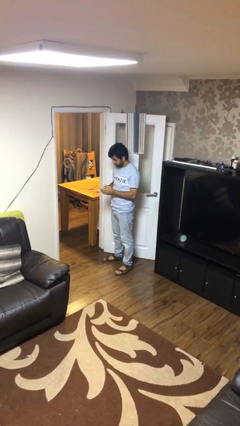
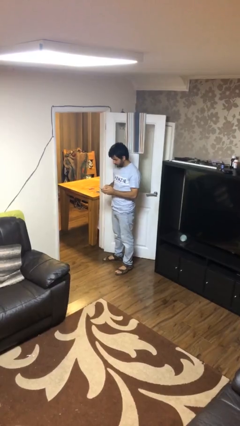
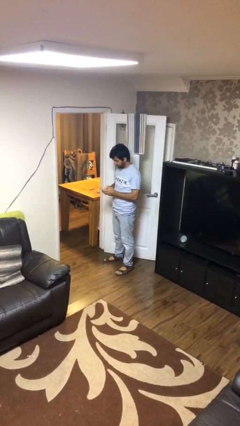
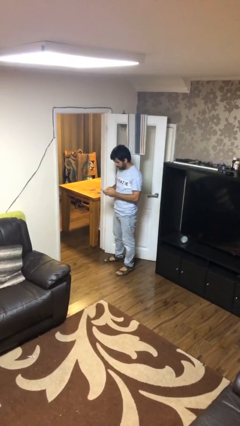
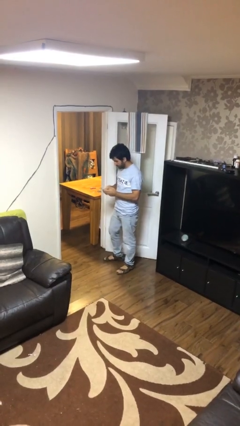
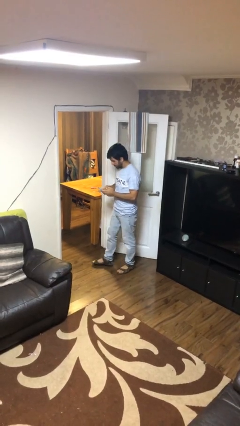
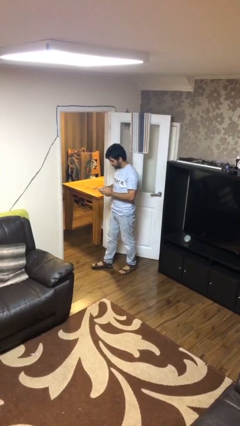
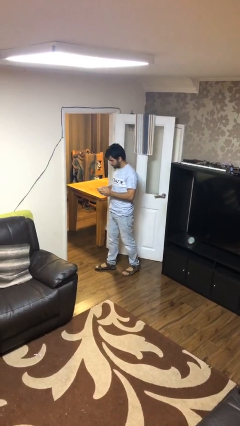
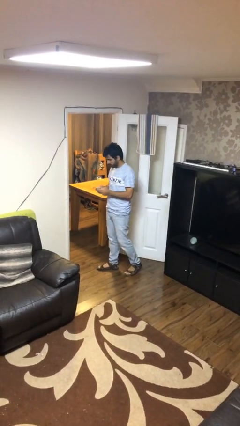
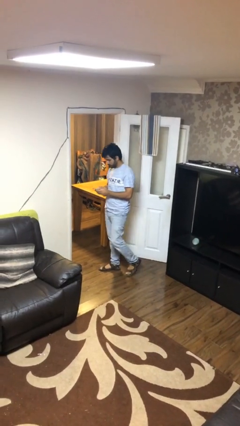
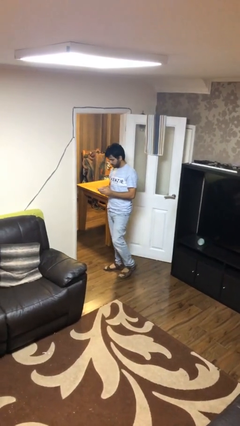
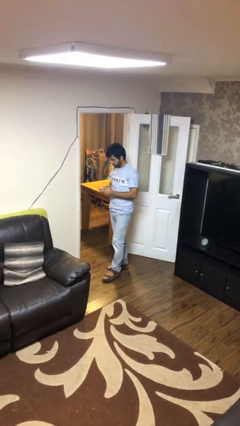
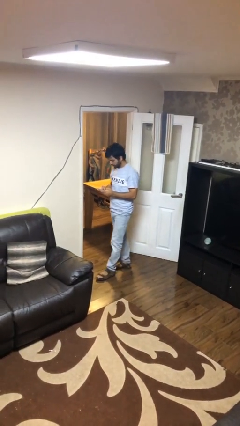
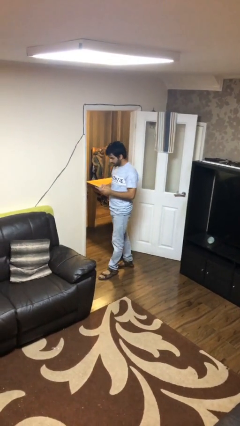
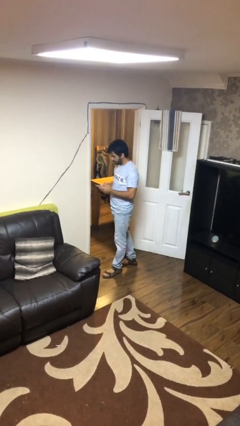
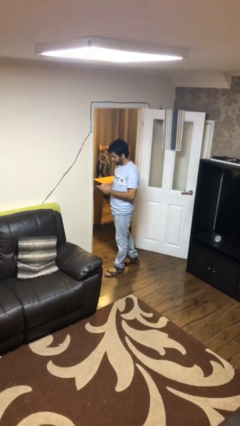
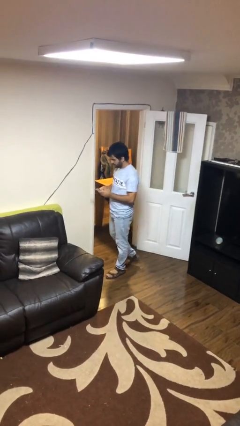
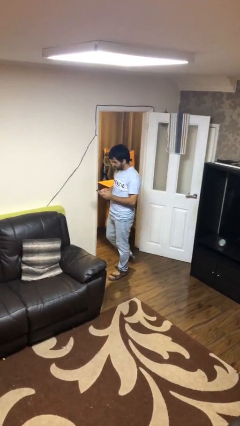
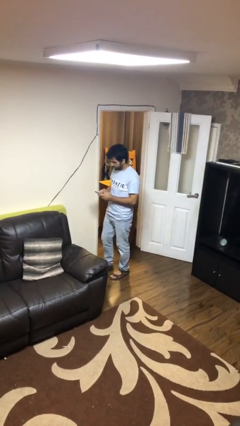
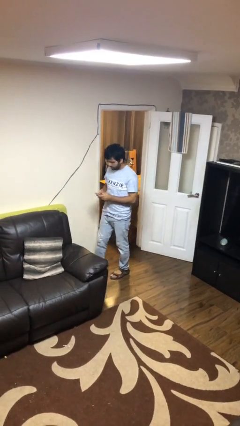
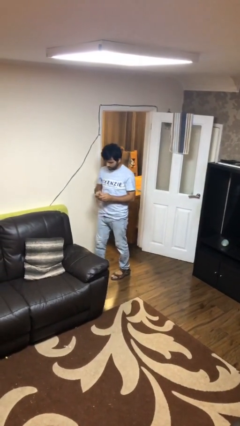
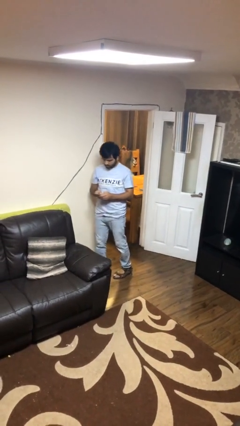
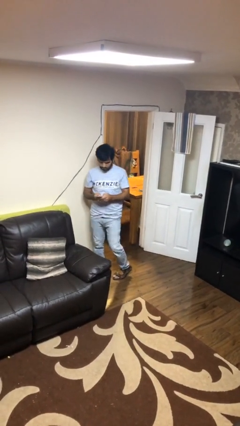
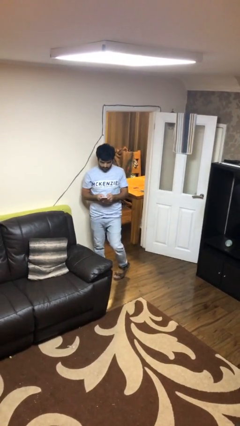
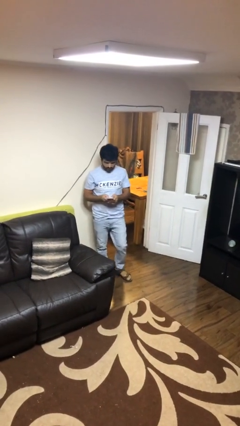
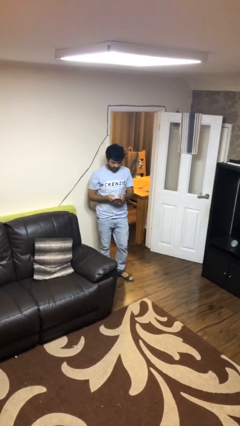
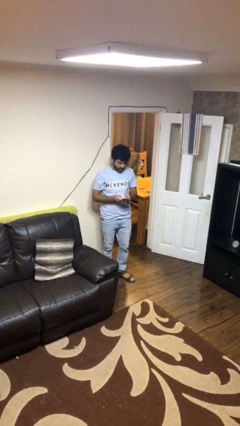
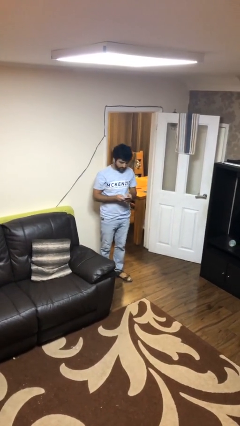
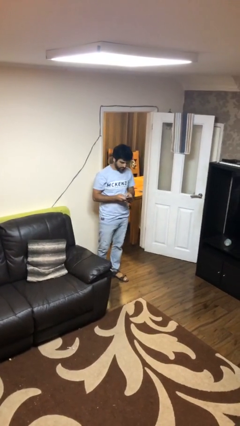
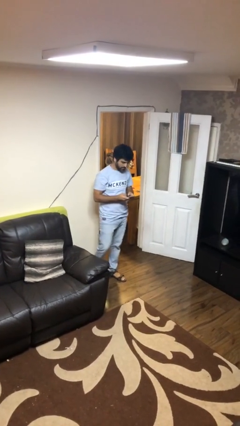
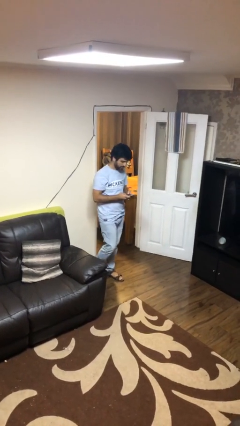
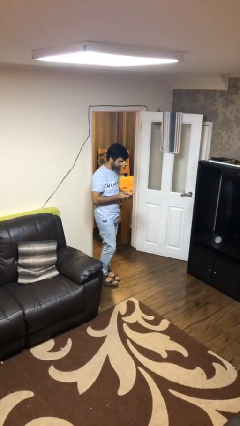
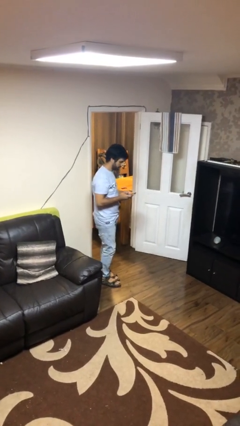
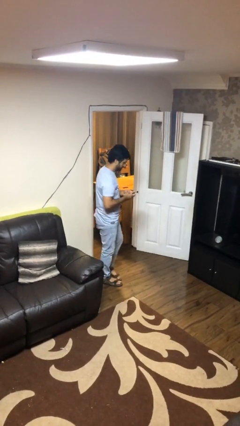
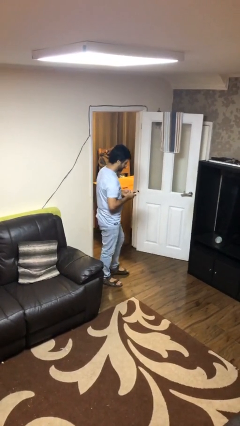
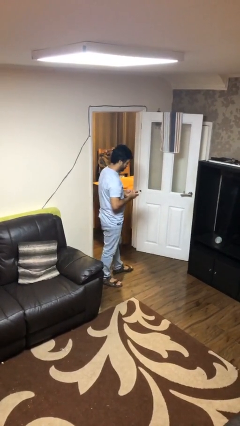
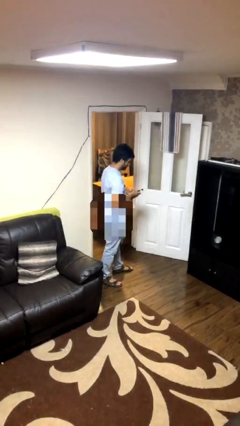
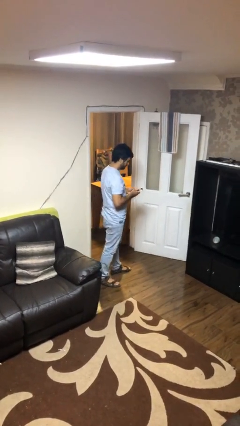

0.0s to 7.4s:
person texts on phone

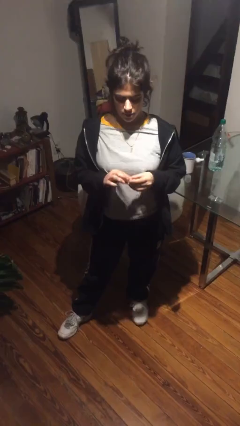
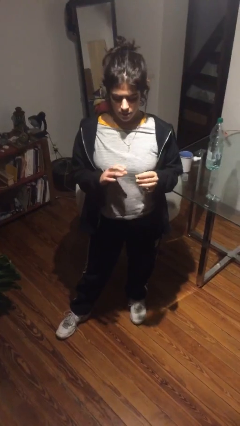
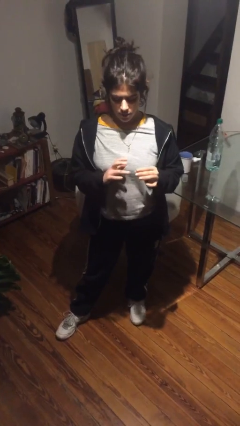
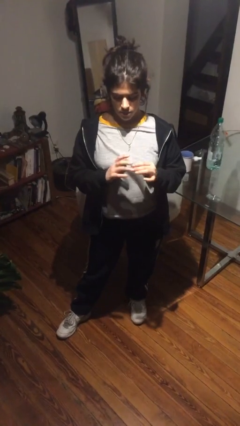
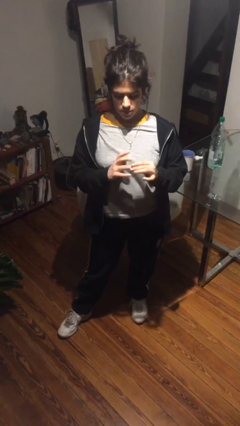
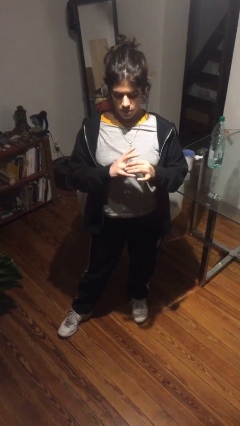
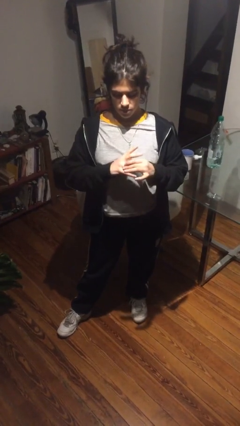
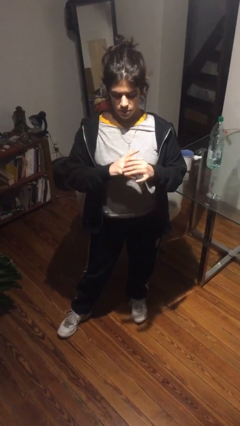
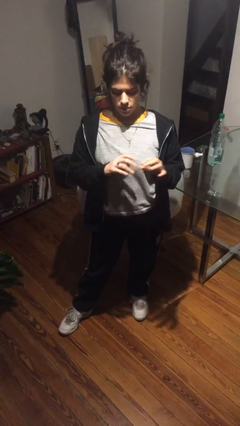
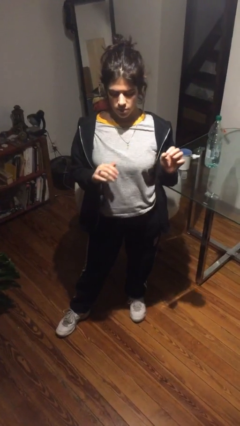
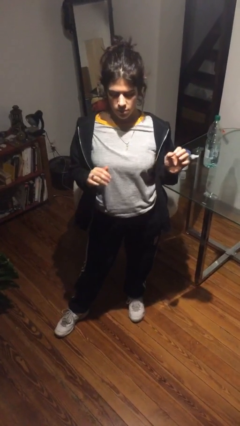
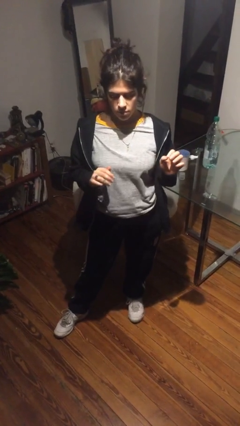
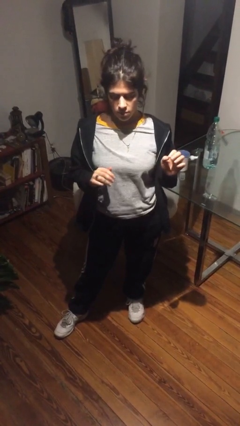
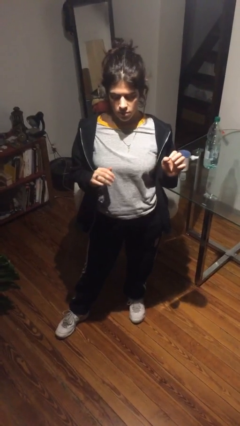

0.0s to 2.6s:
person puts on ring

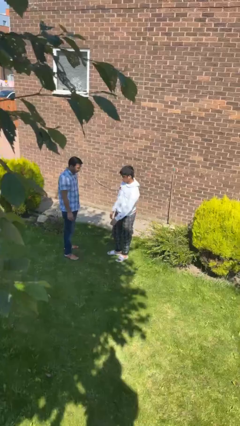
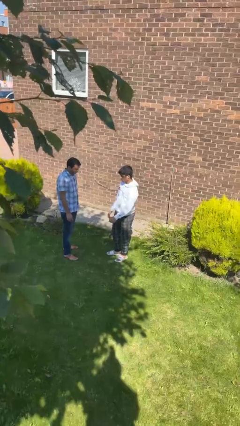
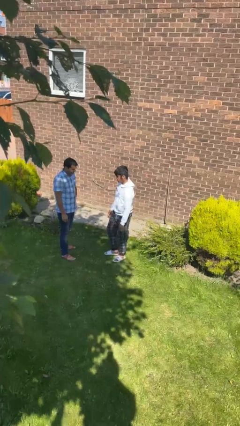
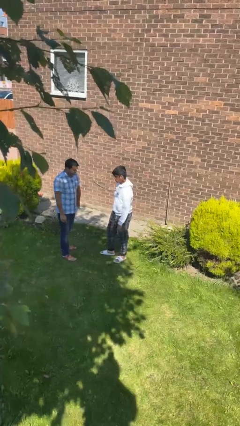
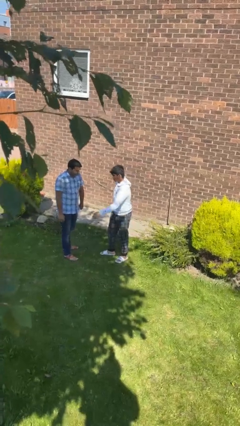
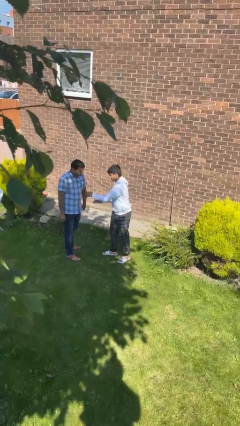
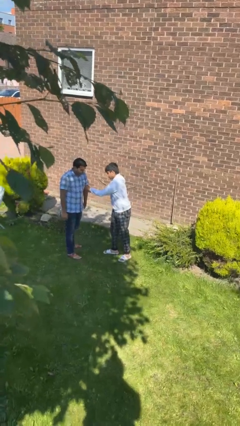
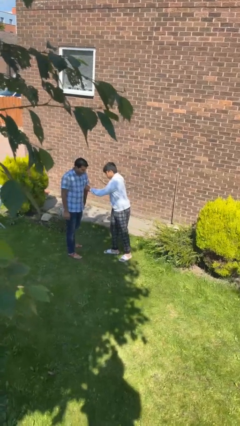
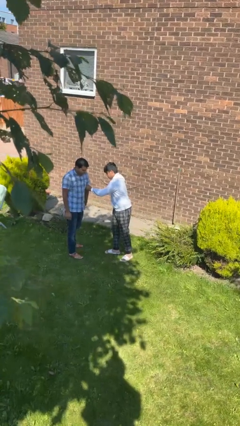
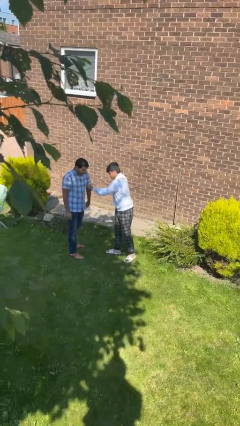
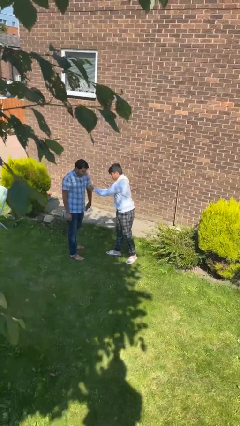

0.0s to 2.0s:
person grabs person by bicep

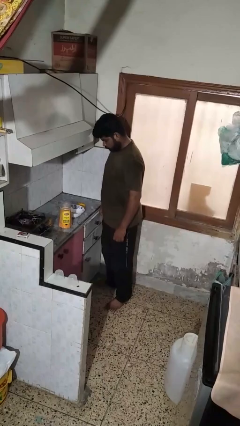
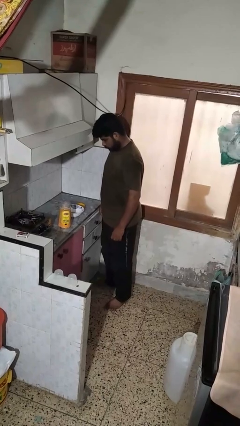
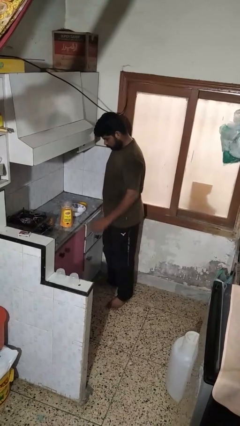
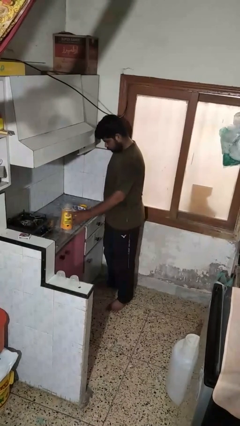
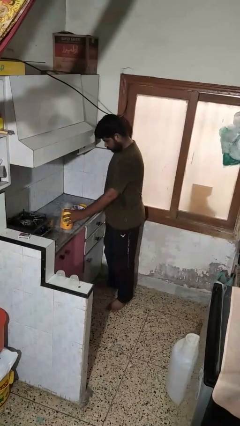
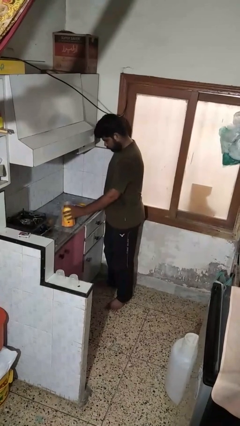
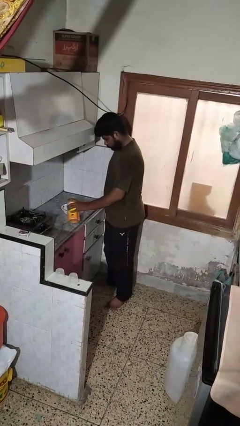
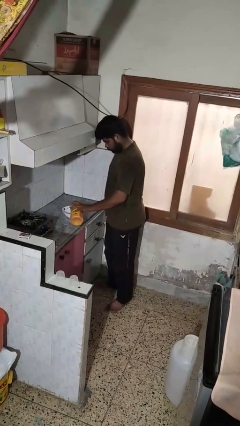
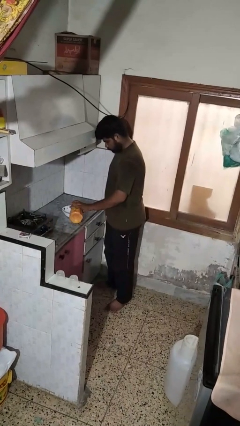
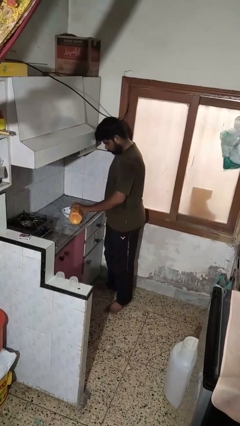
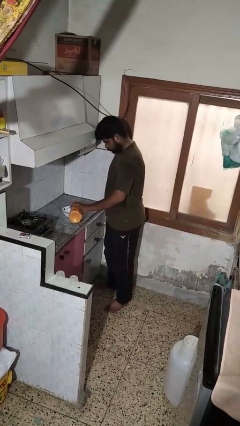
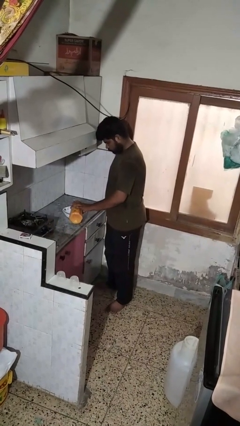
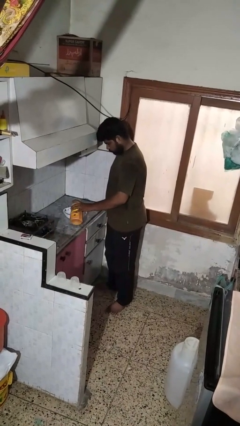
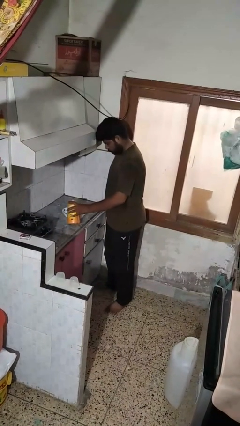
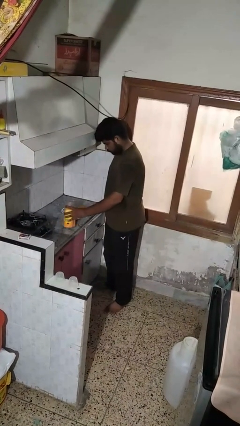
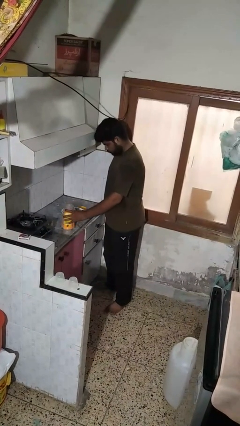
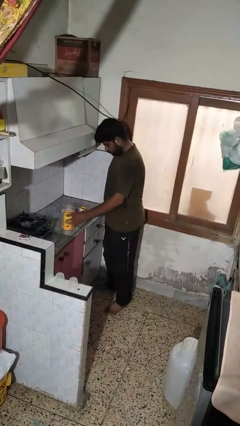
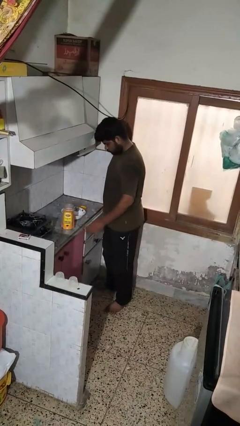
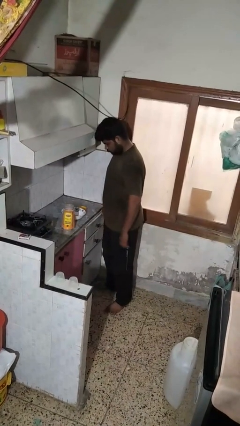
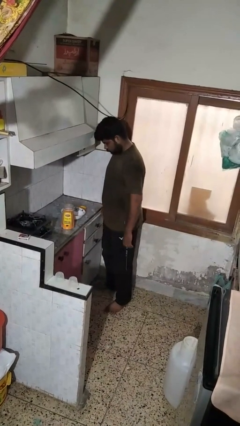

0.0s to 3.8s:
person pours into bowl

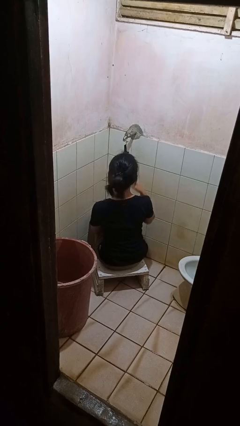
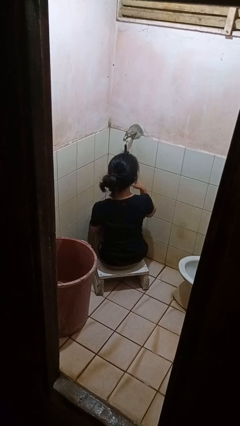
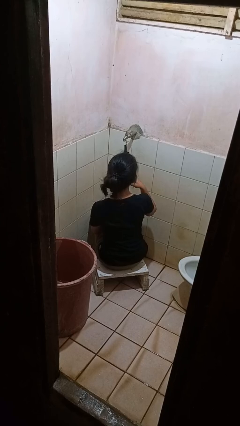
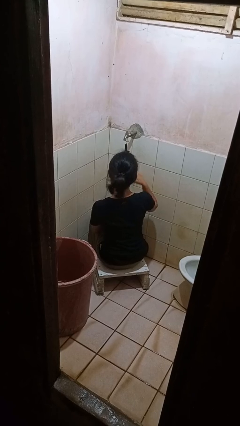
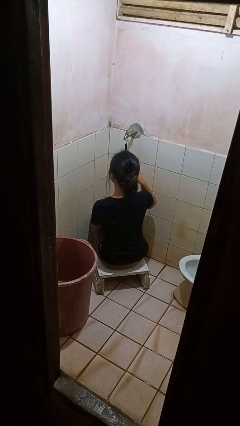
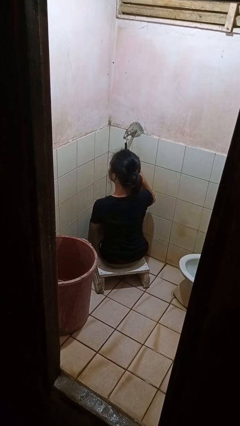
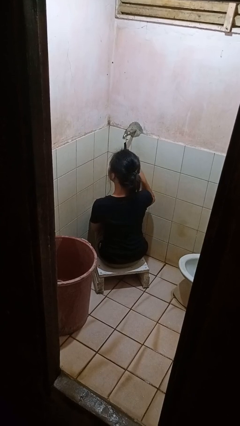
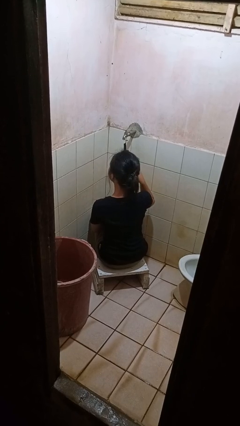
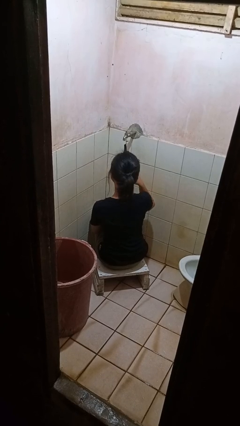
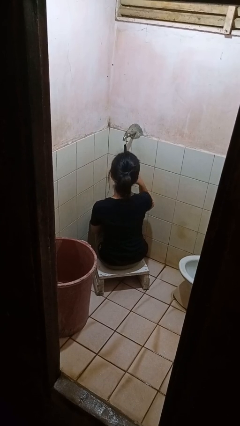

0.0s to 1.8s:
person brushes teeth
